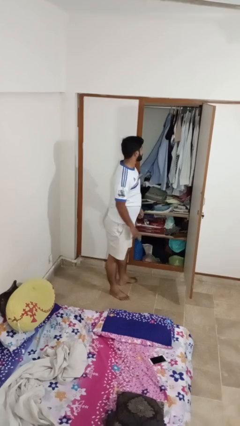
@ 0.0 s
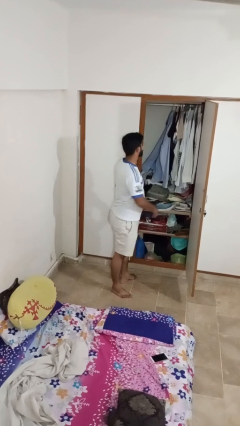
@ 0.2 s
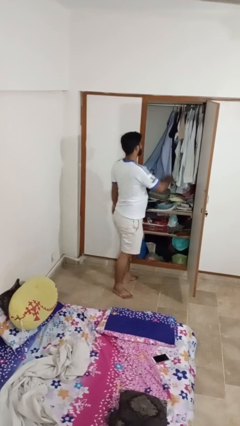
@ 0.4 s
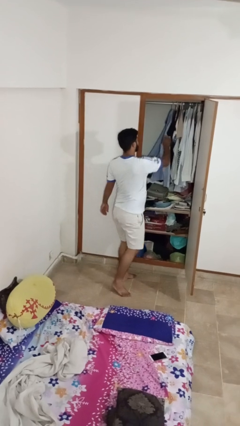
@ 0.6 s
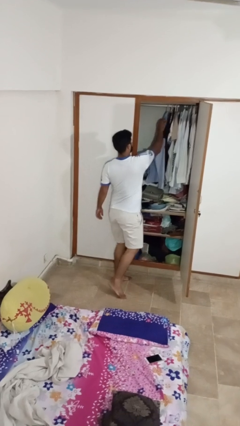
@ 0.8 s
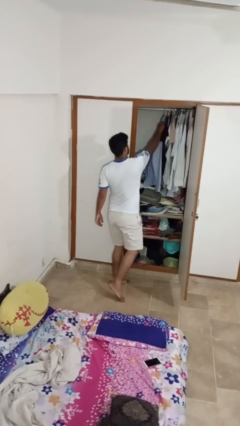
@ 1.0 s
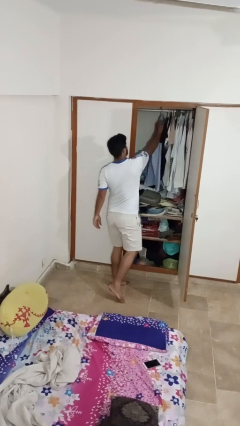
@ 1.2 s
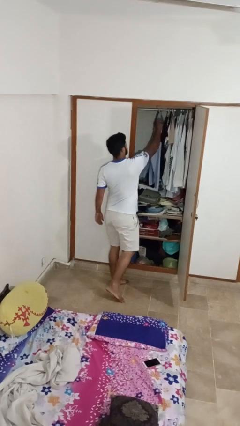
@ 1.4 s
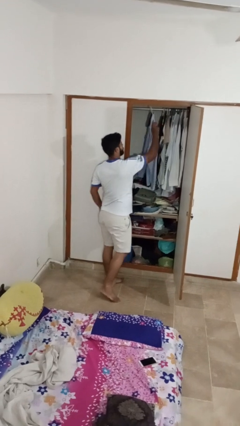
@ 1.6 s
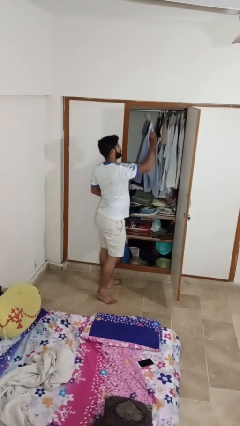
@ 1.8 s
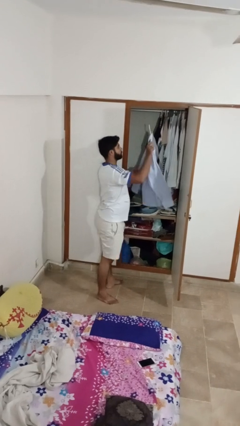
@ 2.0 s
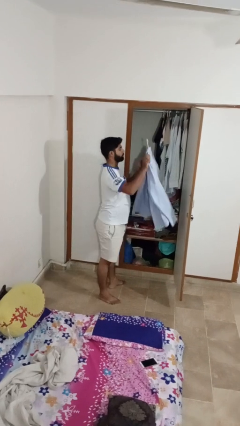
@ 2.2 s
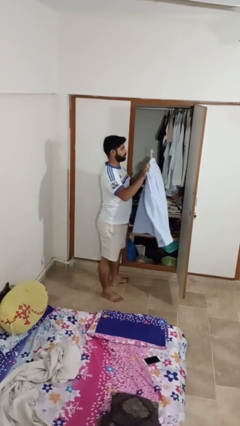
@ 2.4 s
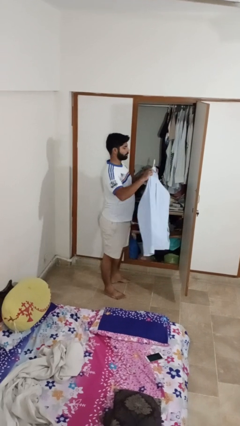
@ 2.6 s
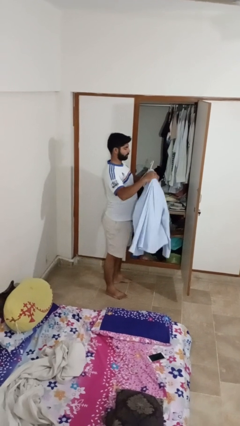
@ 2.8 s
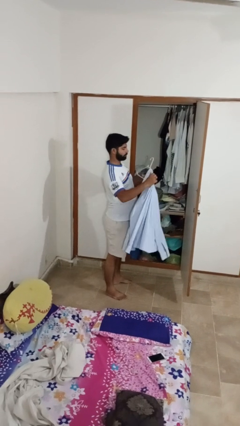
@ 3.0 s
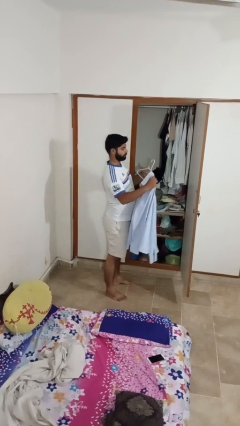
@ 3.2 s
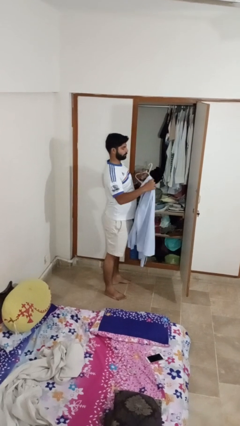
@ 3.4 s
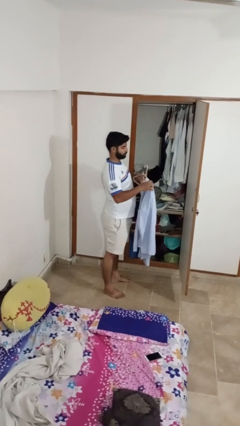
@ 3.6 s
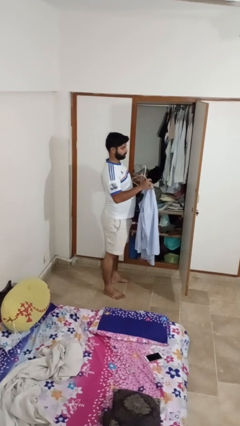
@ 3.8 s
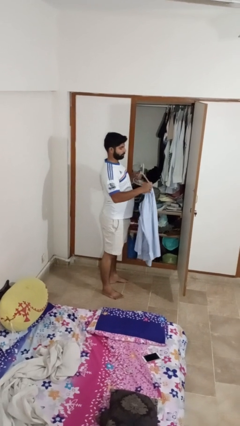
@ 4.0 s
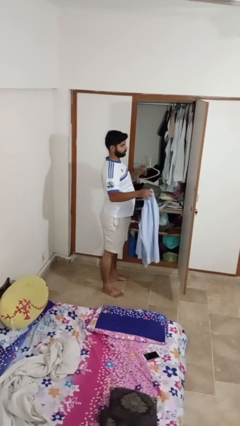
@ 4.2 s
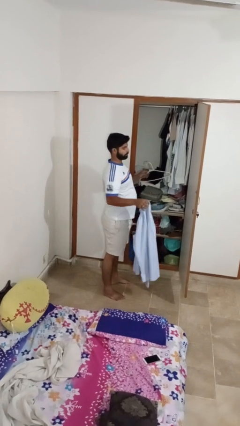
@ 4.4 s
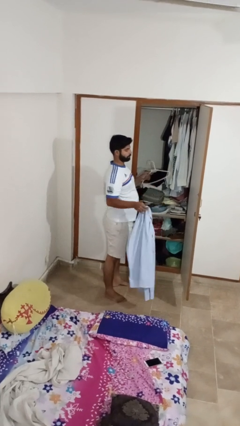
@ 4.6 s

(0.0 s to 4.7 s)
person takes clothes from closet

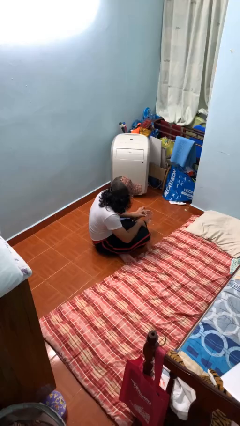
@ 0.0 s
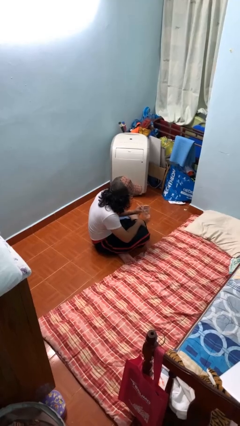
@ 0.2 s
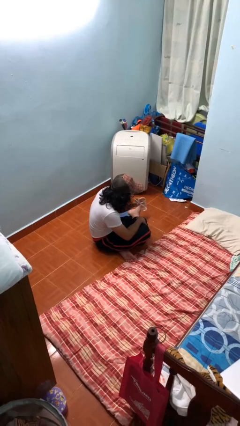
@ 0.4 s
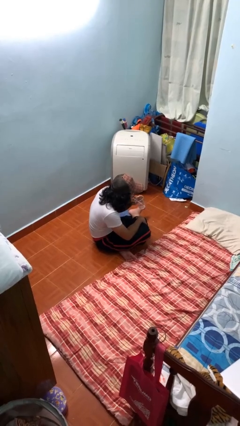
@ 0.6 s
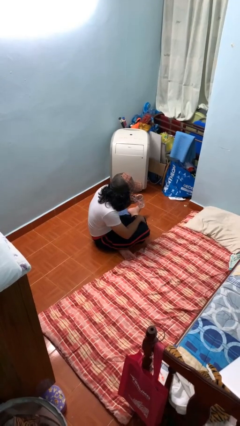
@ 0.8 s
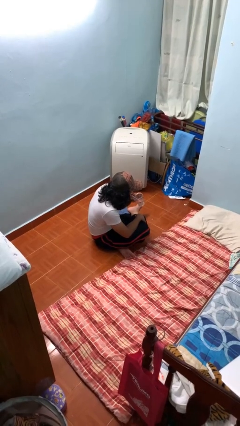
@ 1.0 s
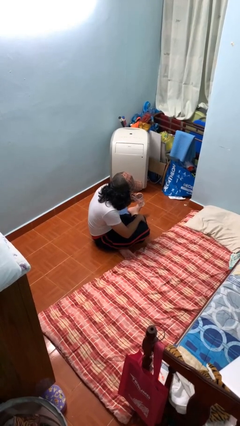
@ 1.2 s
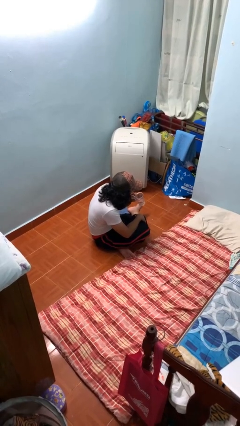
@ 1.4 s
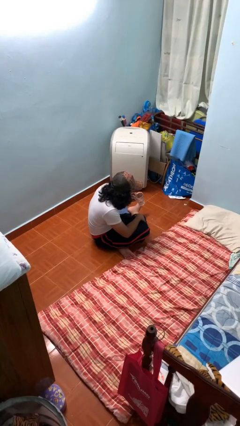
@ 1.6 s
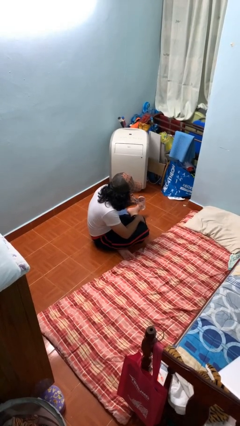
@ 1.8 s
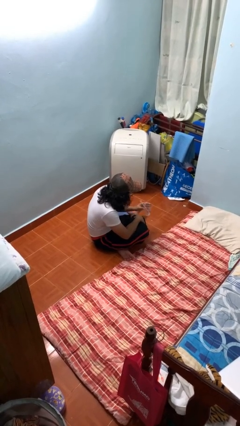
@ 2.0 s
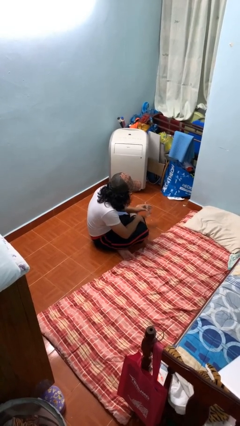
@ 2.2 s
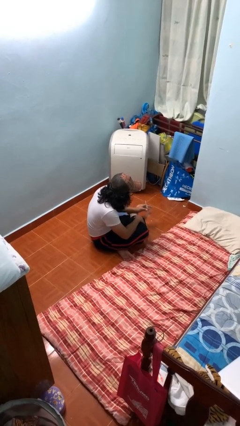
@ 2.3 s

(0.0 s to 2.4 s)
person drinks from straw

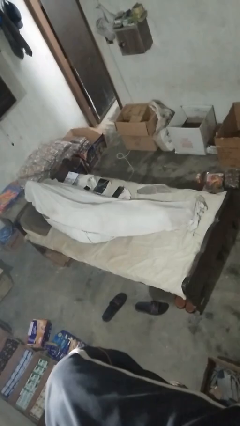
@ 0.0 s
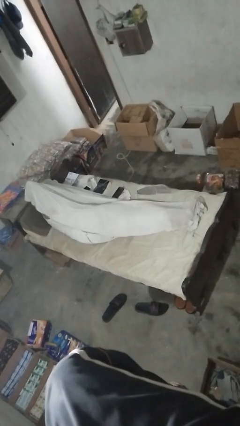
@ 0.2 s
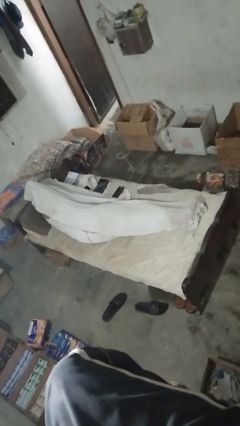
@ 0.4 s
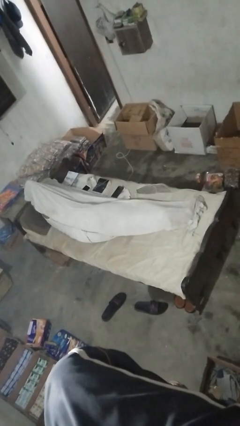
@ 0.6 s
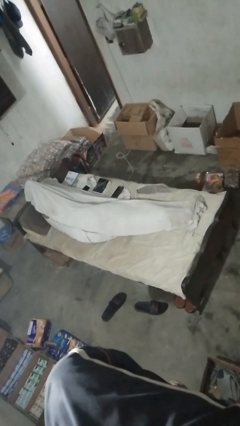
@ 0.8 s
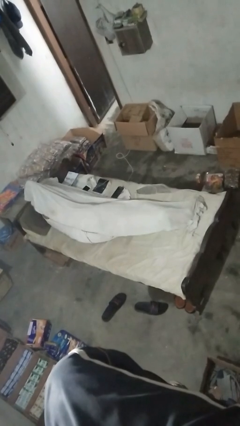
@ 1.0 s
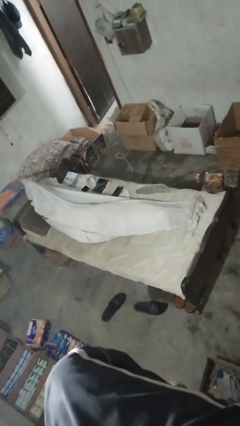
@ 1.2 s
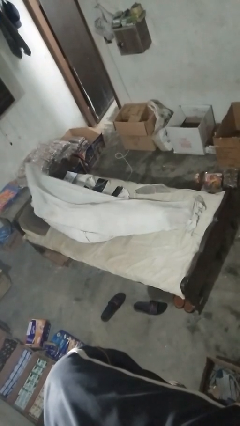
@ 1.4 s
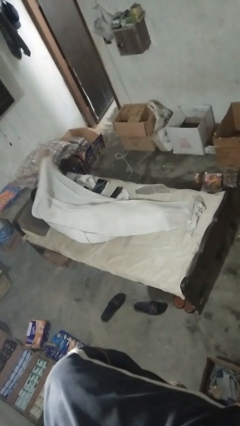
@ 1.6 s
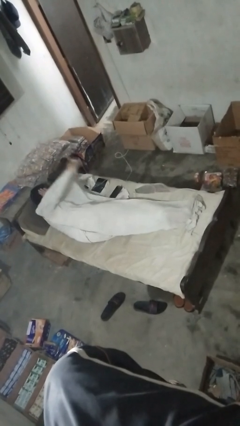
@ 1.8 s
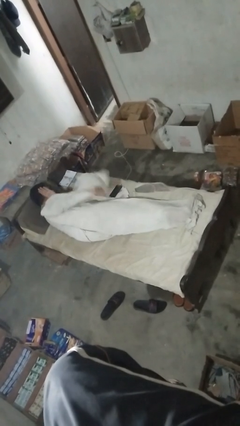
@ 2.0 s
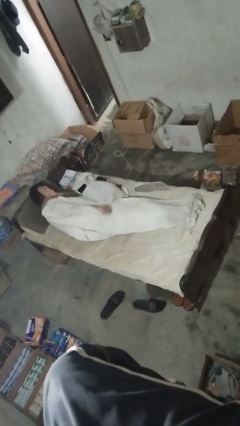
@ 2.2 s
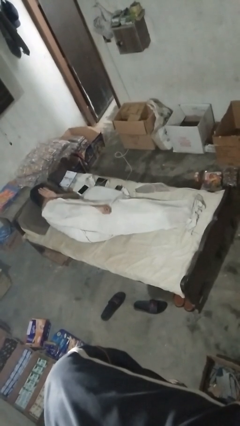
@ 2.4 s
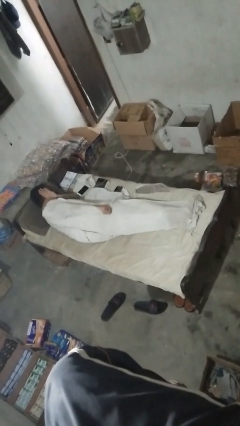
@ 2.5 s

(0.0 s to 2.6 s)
person uncovers with bedsheets

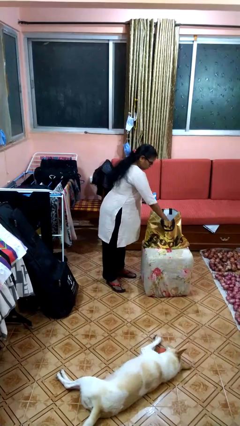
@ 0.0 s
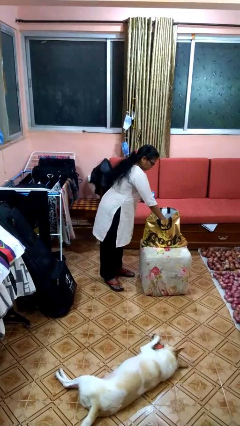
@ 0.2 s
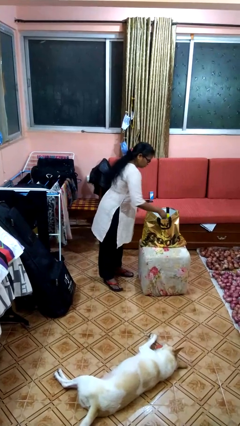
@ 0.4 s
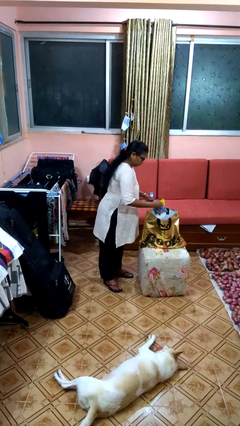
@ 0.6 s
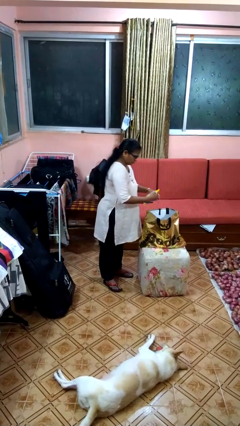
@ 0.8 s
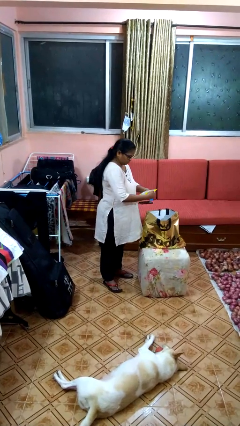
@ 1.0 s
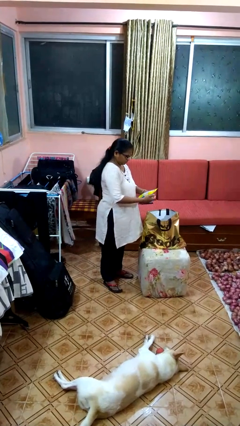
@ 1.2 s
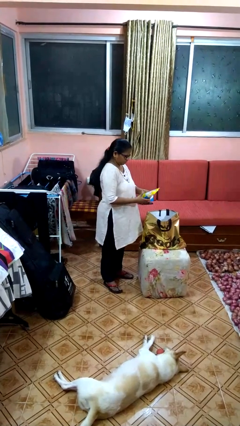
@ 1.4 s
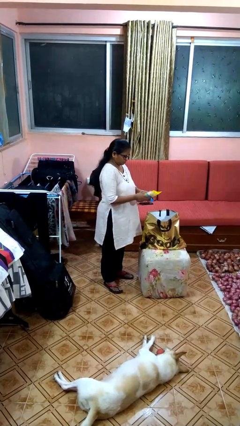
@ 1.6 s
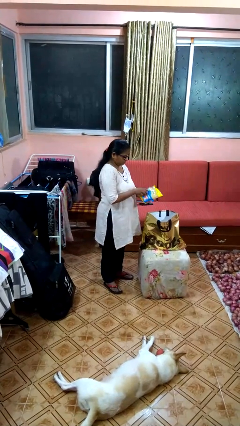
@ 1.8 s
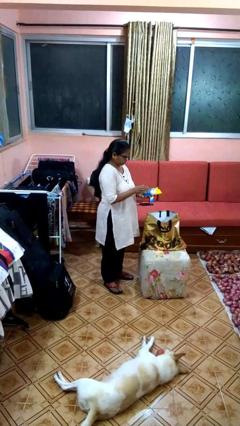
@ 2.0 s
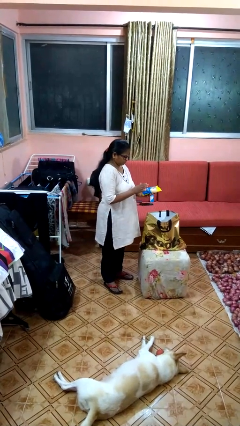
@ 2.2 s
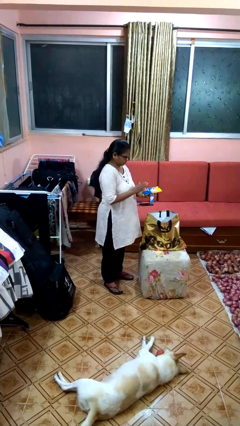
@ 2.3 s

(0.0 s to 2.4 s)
person takes object from bag

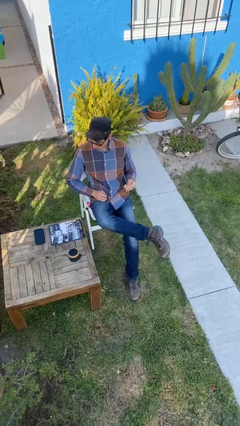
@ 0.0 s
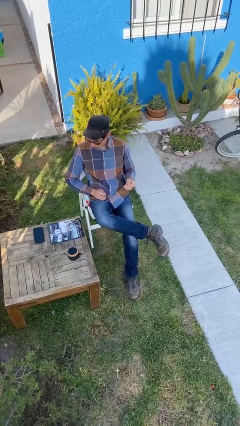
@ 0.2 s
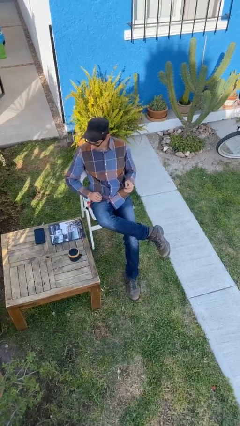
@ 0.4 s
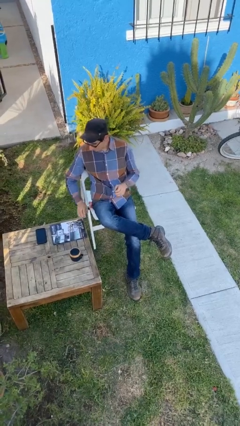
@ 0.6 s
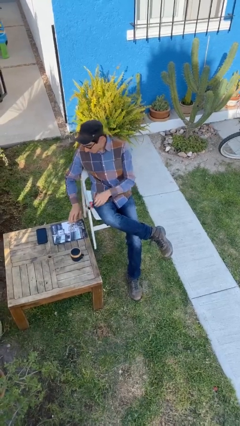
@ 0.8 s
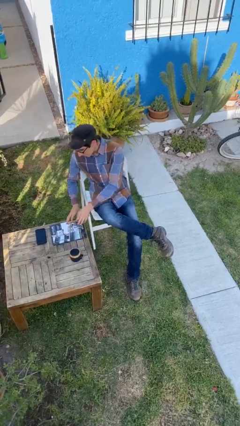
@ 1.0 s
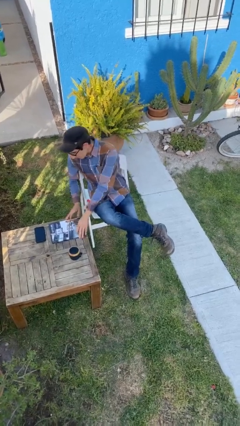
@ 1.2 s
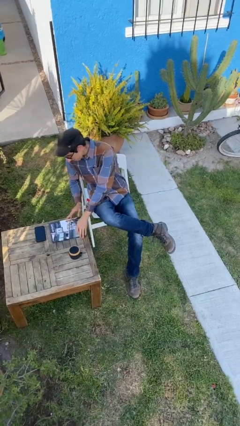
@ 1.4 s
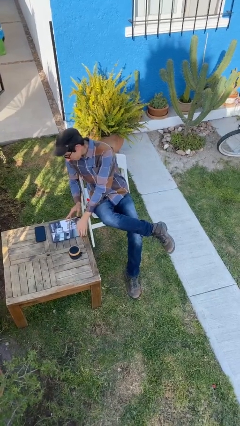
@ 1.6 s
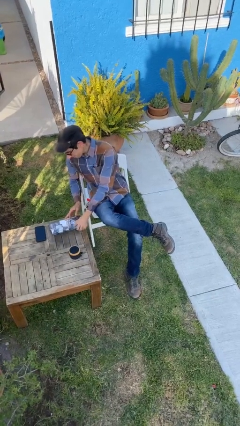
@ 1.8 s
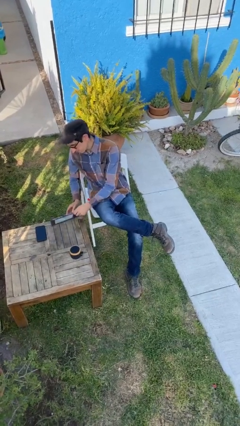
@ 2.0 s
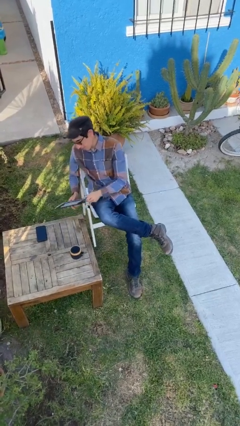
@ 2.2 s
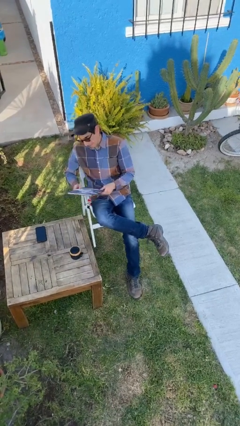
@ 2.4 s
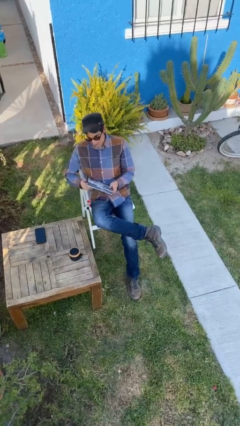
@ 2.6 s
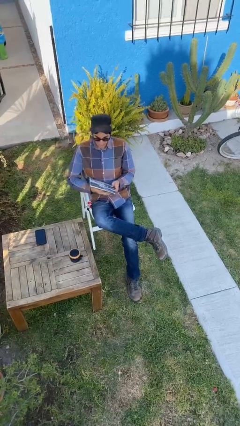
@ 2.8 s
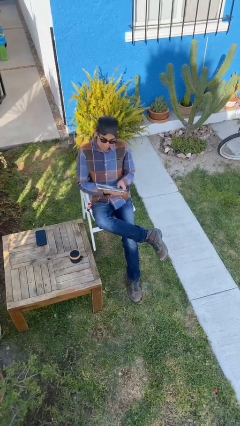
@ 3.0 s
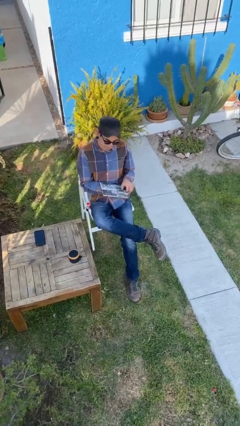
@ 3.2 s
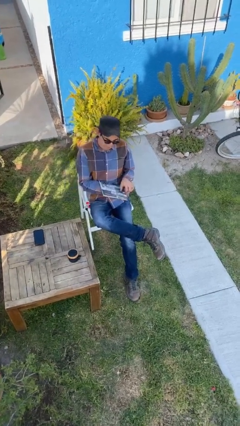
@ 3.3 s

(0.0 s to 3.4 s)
person picks up object from table

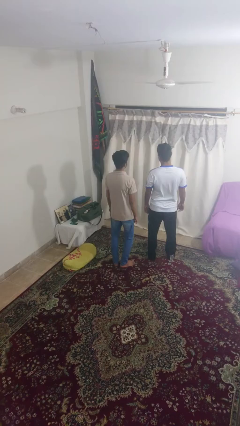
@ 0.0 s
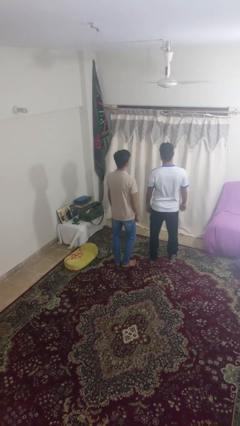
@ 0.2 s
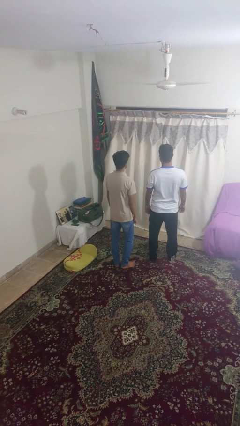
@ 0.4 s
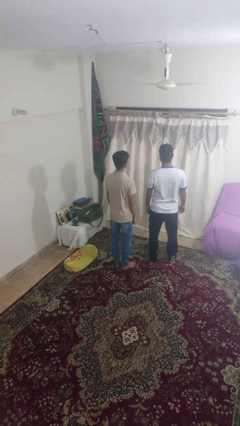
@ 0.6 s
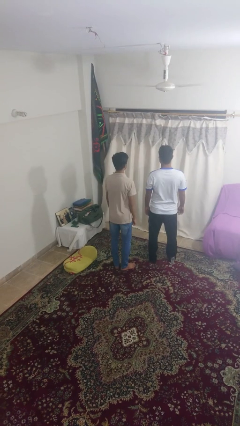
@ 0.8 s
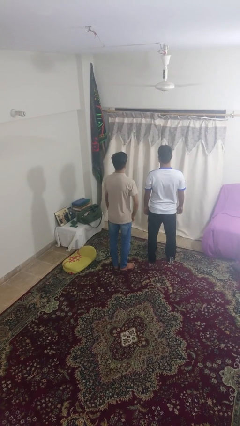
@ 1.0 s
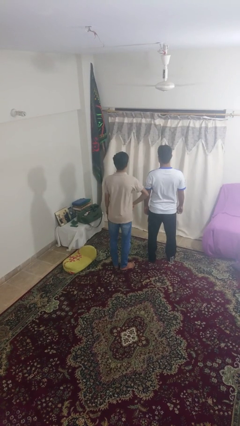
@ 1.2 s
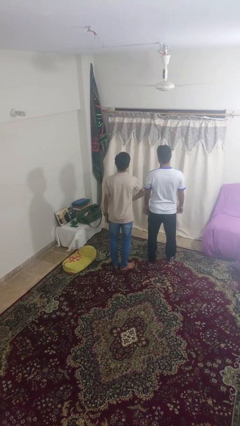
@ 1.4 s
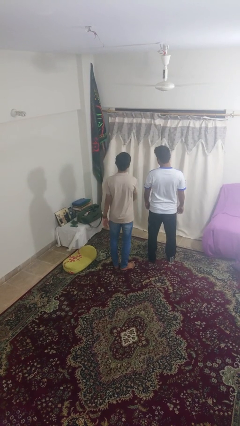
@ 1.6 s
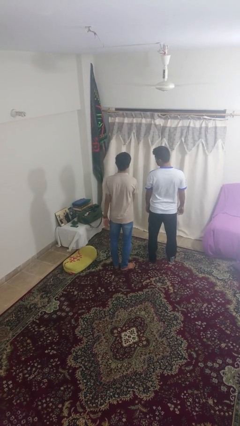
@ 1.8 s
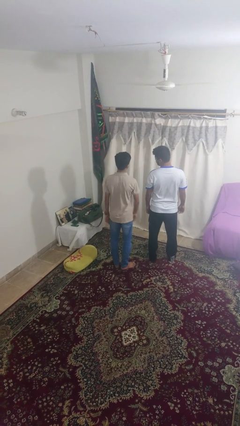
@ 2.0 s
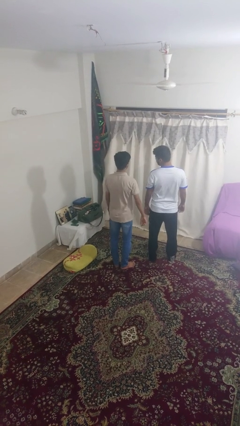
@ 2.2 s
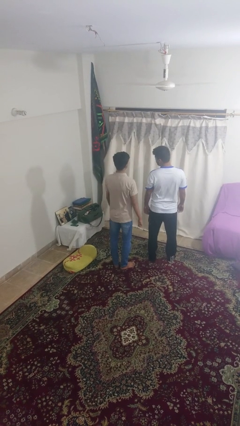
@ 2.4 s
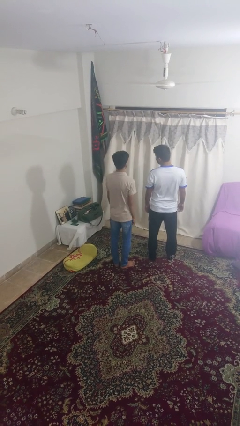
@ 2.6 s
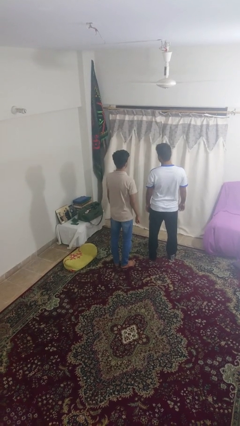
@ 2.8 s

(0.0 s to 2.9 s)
person nudges person with elbow
